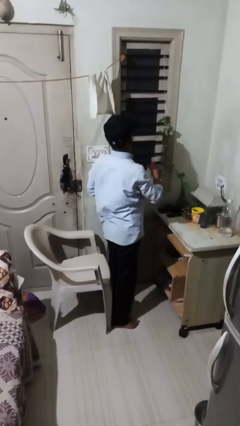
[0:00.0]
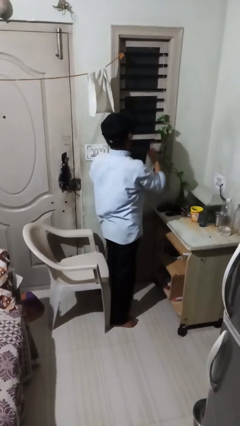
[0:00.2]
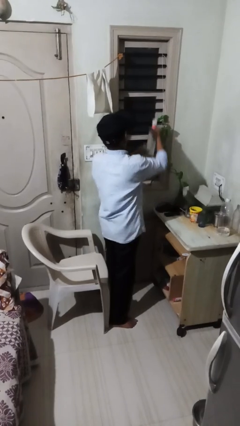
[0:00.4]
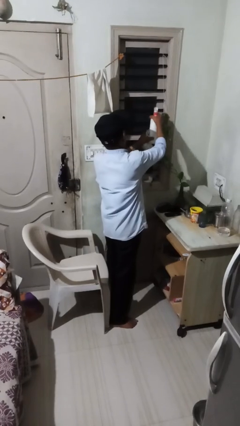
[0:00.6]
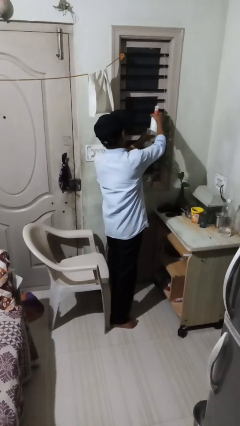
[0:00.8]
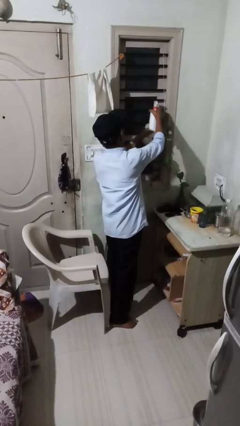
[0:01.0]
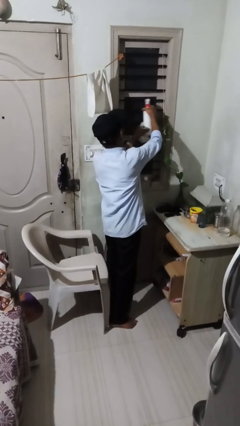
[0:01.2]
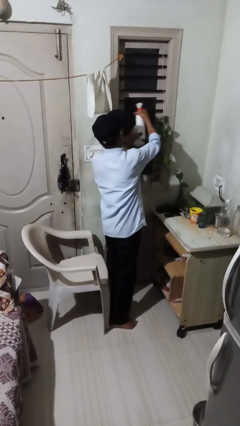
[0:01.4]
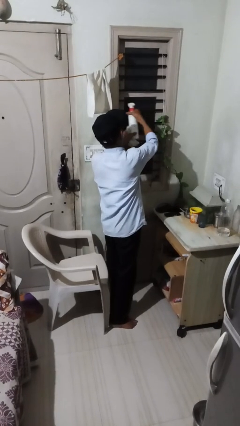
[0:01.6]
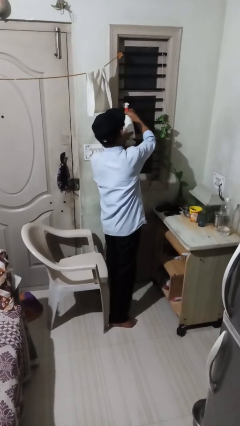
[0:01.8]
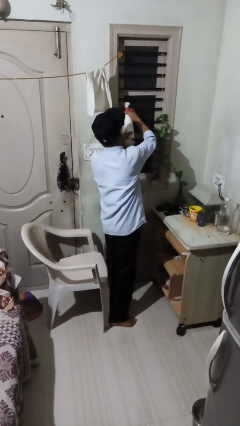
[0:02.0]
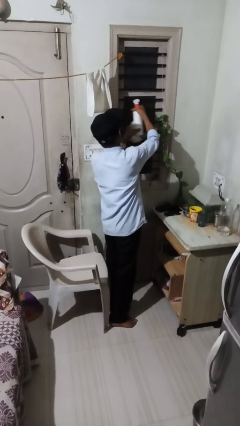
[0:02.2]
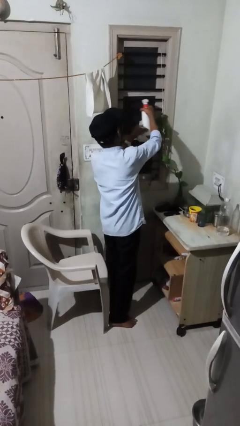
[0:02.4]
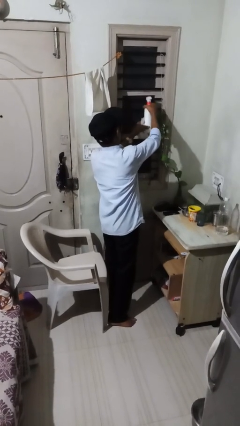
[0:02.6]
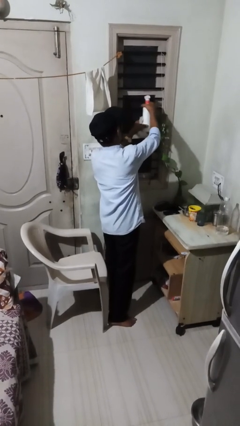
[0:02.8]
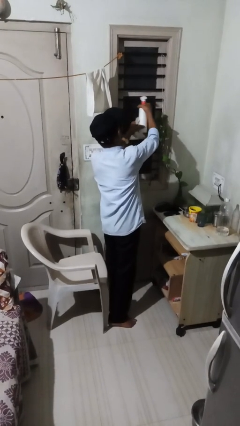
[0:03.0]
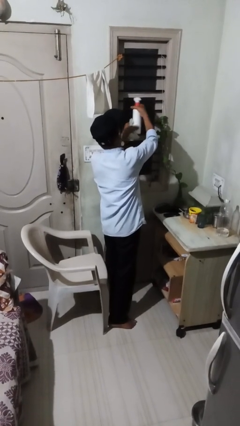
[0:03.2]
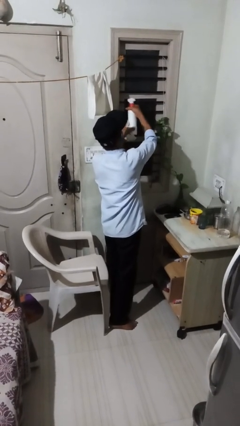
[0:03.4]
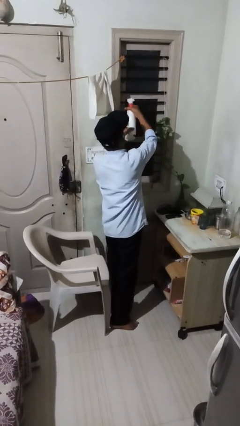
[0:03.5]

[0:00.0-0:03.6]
person sprays from bottle

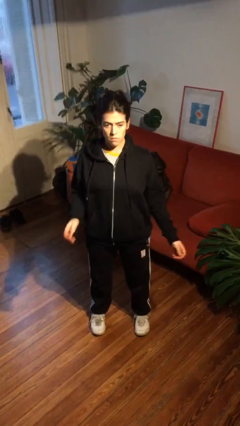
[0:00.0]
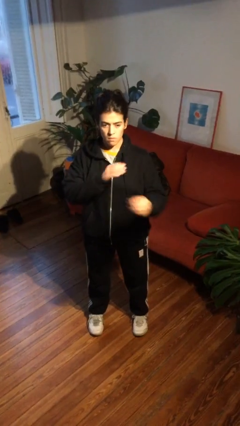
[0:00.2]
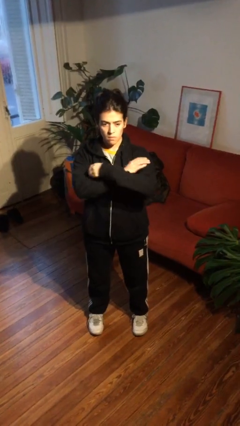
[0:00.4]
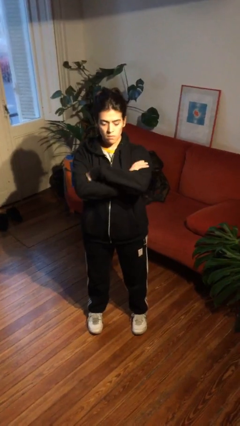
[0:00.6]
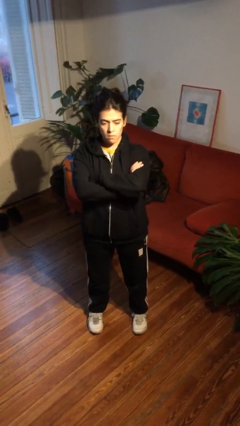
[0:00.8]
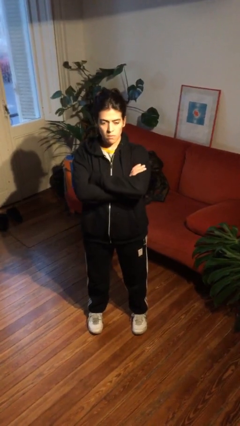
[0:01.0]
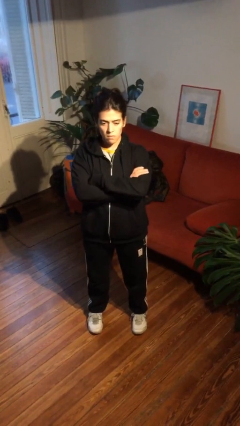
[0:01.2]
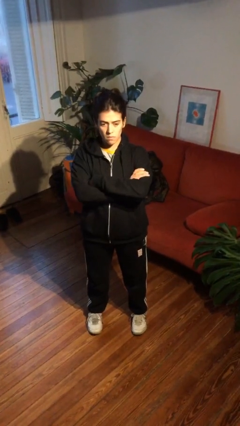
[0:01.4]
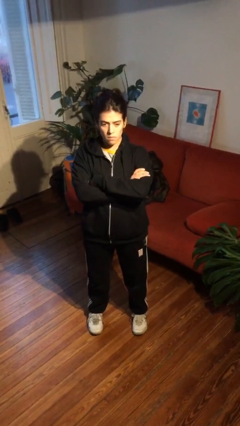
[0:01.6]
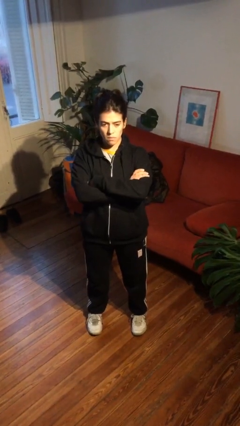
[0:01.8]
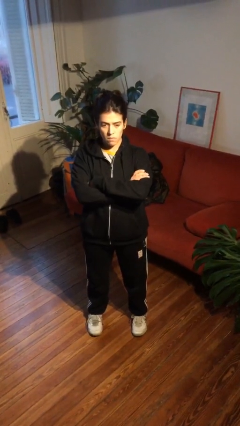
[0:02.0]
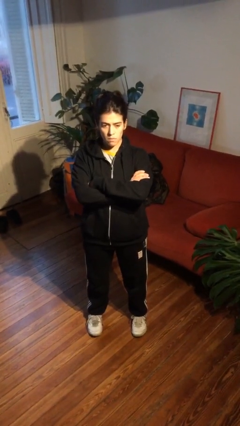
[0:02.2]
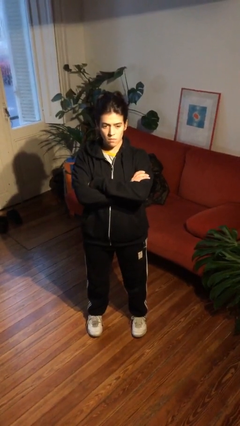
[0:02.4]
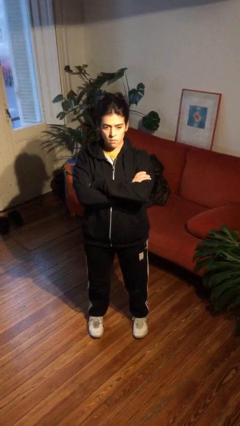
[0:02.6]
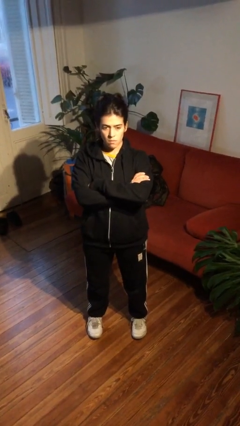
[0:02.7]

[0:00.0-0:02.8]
person crosses arms

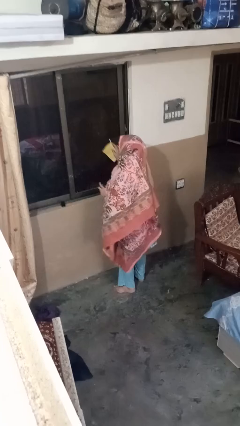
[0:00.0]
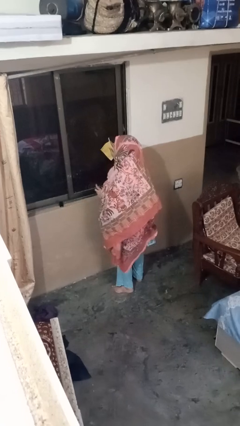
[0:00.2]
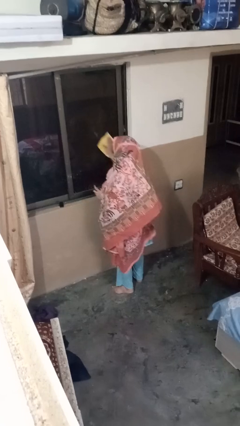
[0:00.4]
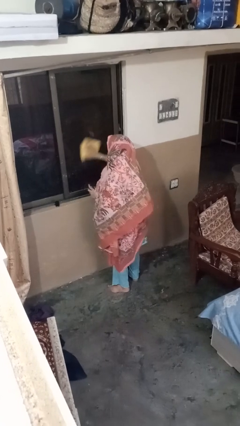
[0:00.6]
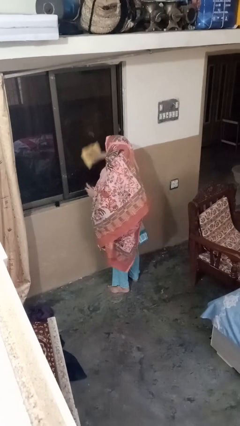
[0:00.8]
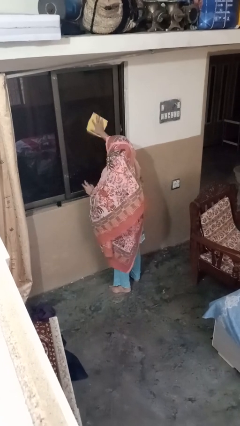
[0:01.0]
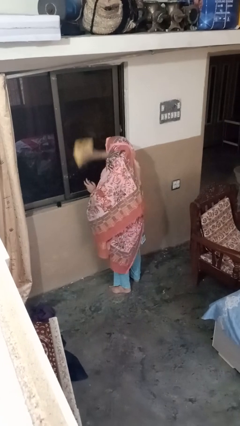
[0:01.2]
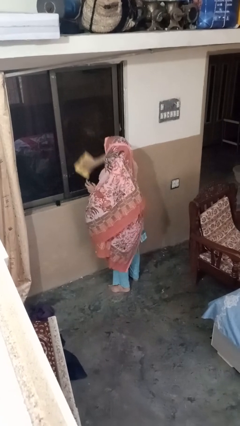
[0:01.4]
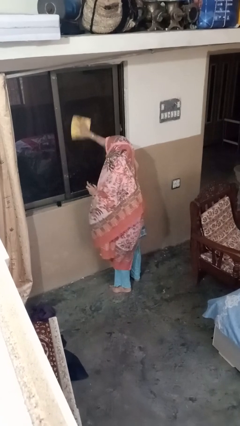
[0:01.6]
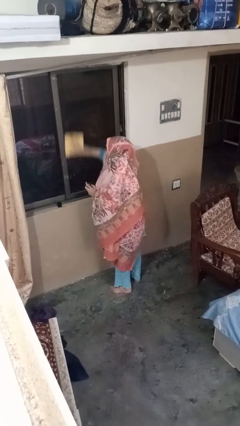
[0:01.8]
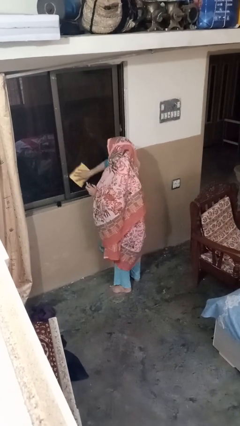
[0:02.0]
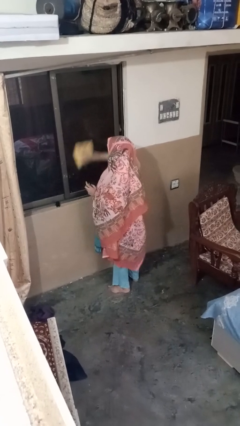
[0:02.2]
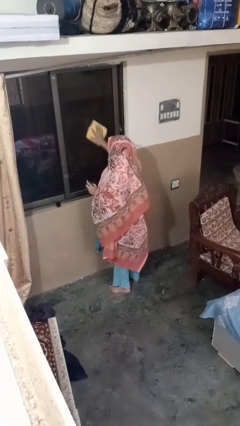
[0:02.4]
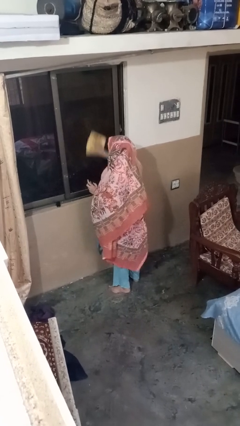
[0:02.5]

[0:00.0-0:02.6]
person washes window

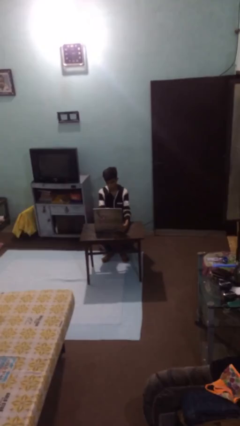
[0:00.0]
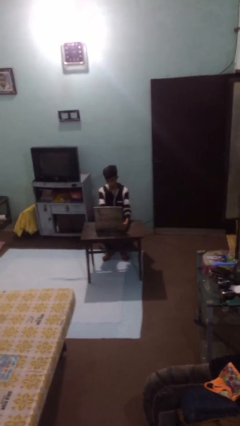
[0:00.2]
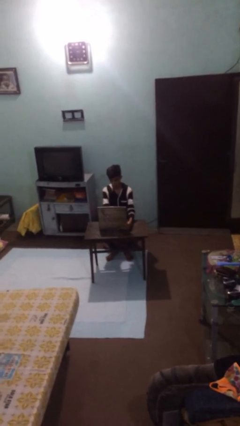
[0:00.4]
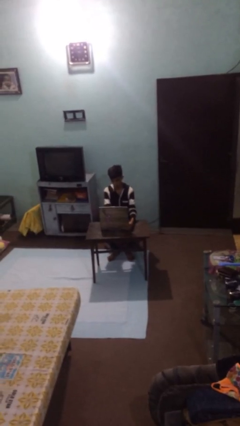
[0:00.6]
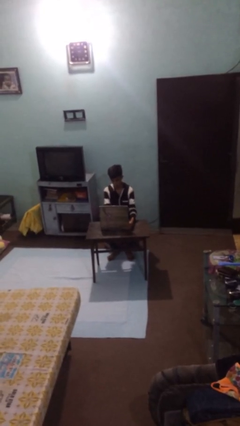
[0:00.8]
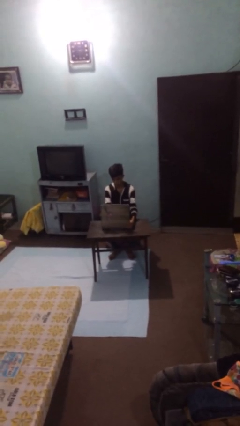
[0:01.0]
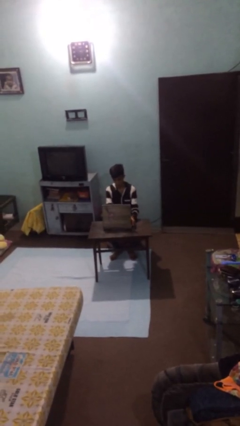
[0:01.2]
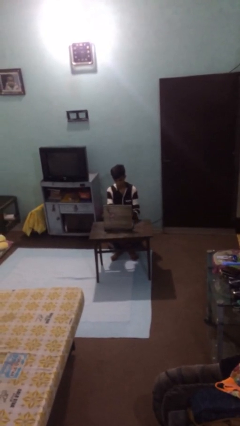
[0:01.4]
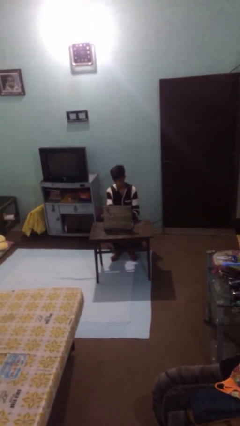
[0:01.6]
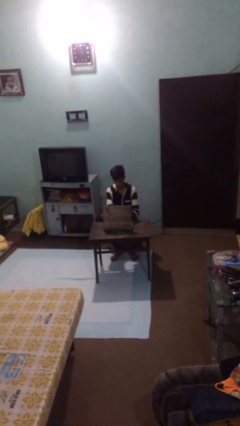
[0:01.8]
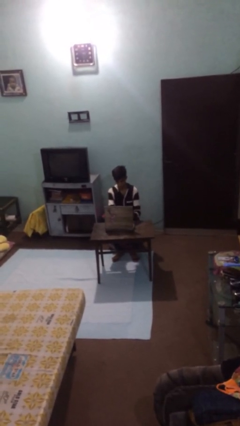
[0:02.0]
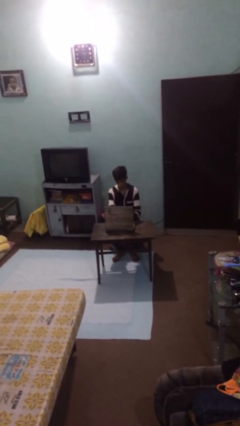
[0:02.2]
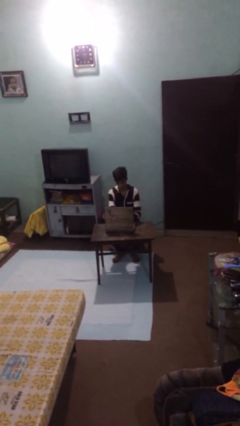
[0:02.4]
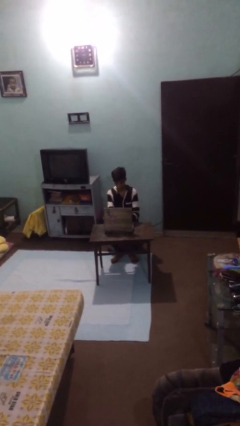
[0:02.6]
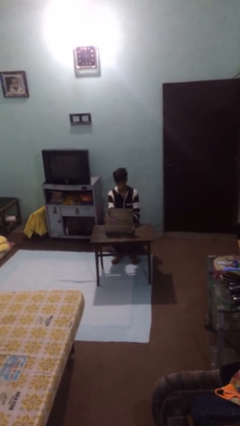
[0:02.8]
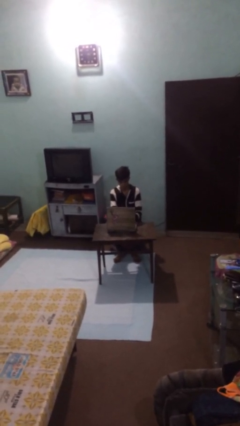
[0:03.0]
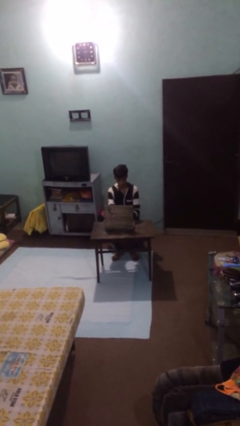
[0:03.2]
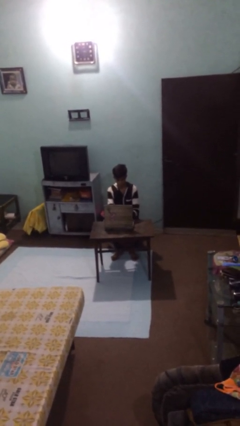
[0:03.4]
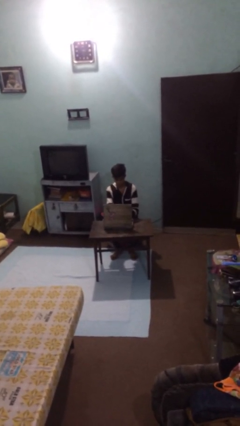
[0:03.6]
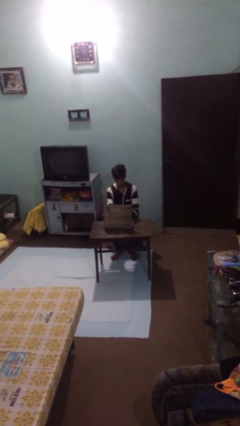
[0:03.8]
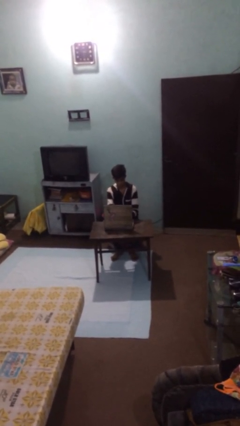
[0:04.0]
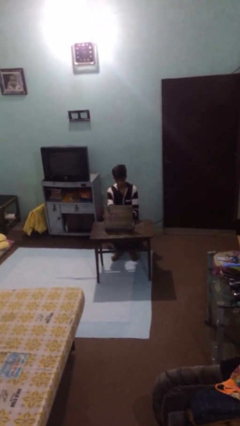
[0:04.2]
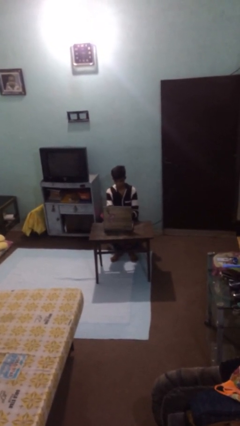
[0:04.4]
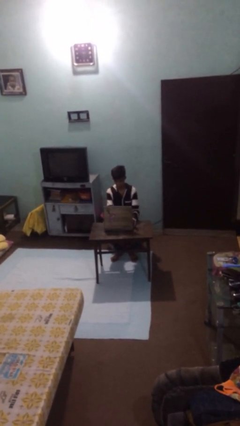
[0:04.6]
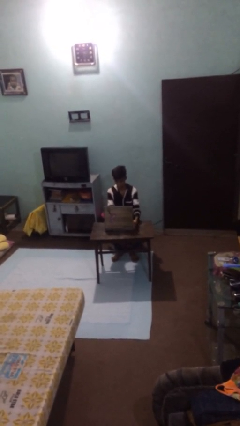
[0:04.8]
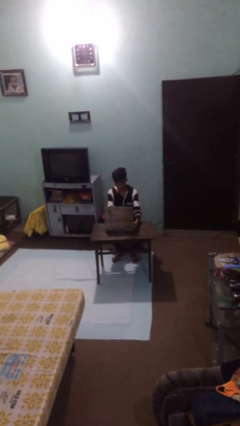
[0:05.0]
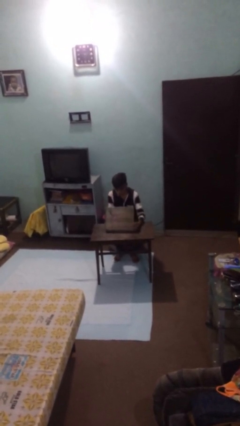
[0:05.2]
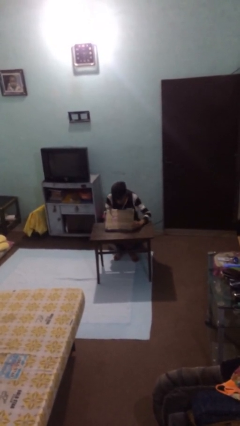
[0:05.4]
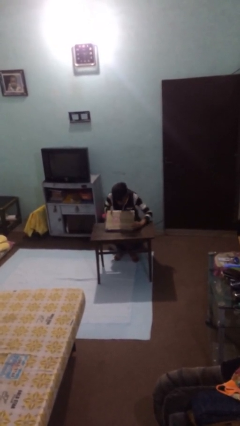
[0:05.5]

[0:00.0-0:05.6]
person interacts with laptop

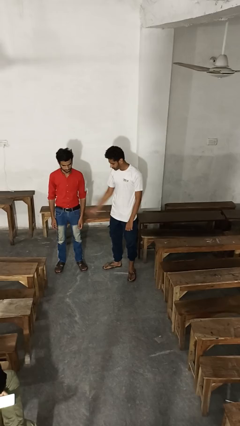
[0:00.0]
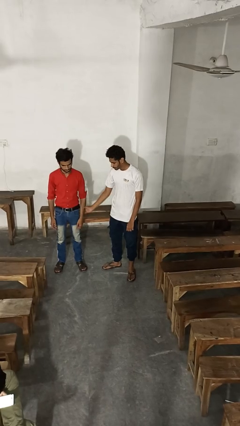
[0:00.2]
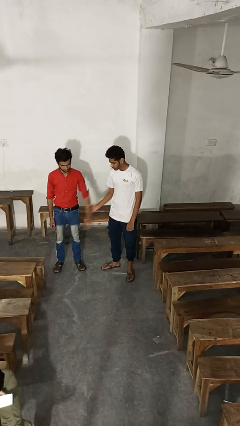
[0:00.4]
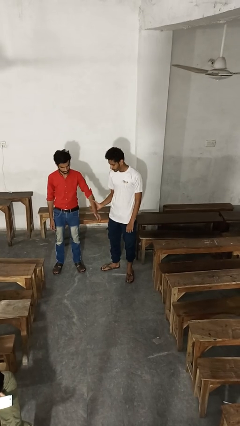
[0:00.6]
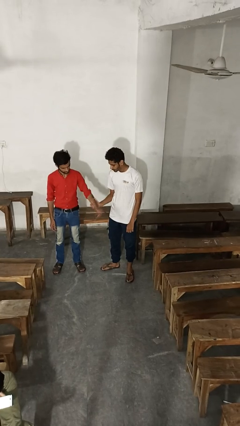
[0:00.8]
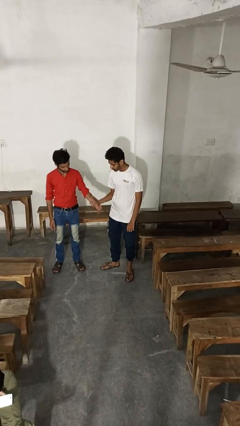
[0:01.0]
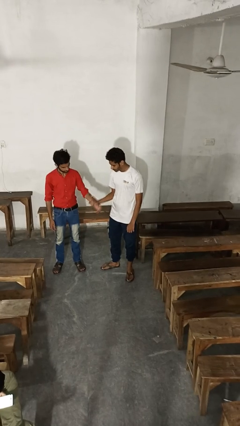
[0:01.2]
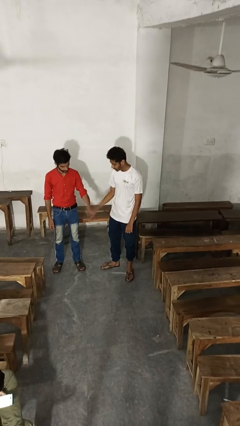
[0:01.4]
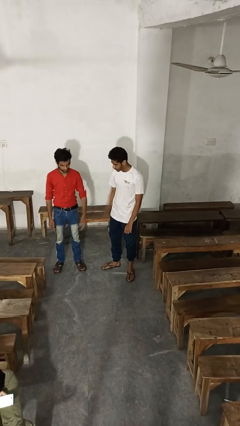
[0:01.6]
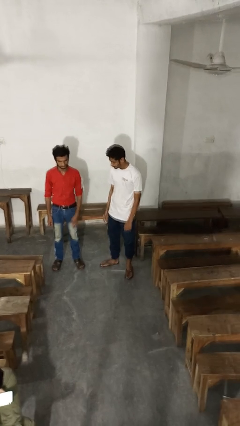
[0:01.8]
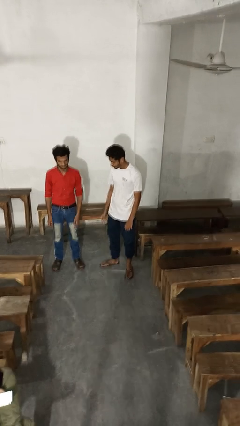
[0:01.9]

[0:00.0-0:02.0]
person grabs person by forearm

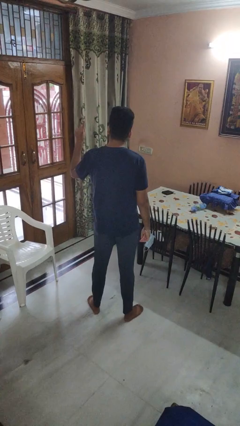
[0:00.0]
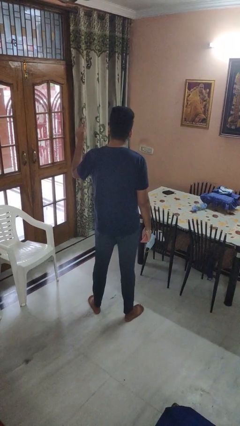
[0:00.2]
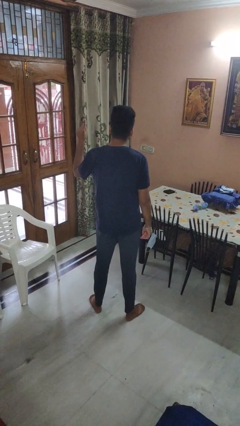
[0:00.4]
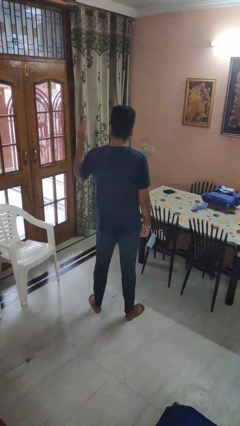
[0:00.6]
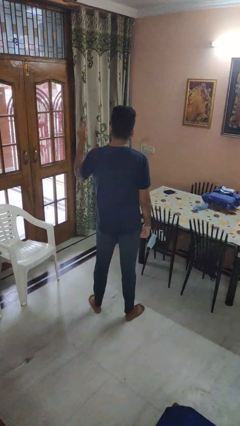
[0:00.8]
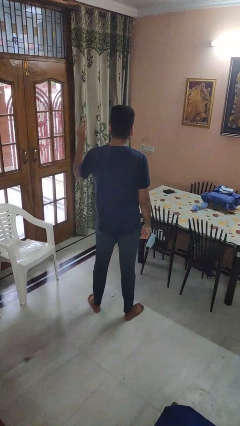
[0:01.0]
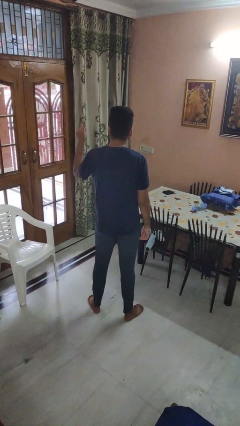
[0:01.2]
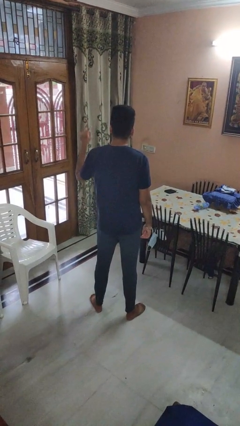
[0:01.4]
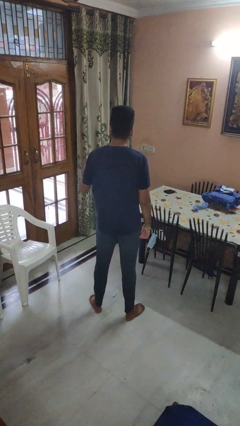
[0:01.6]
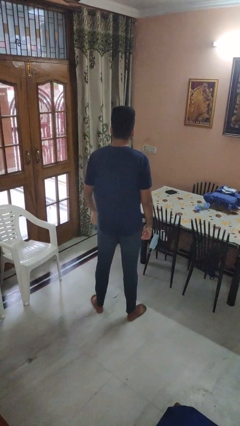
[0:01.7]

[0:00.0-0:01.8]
person gestures number one
